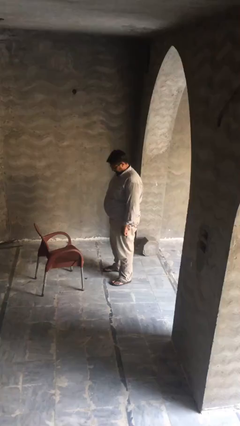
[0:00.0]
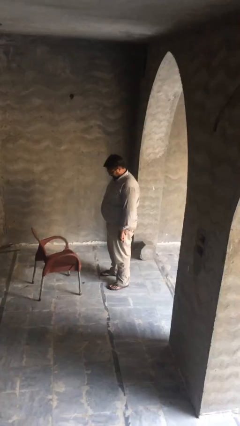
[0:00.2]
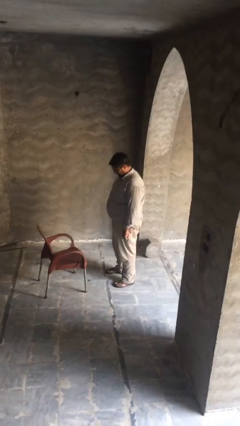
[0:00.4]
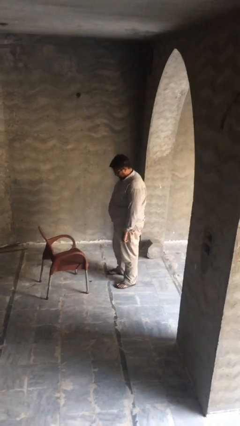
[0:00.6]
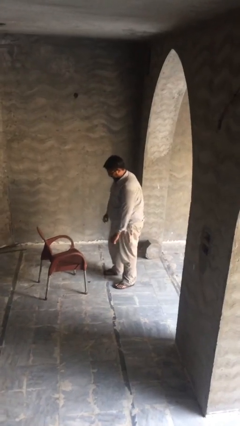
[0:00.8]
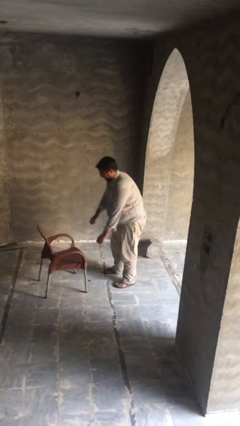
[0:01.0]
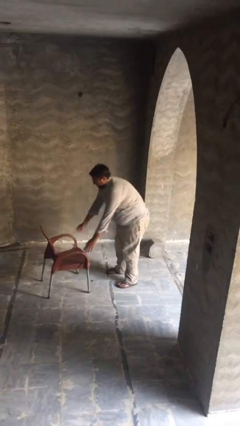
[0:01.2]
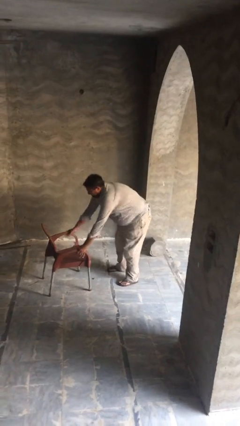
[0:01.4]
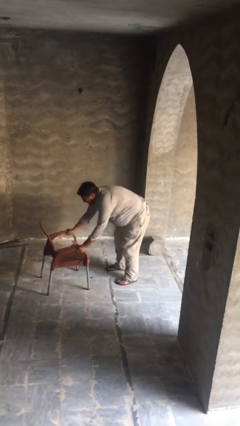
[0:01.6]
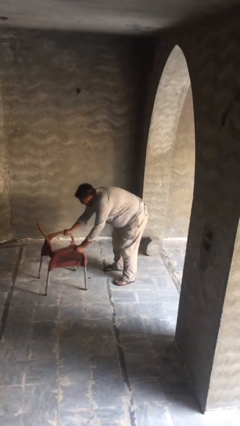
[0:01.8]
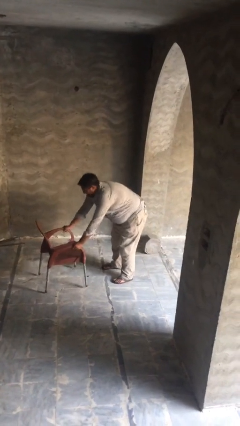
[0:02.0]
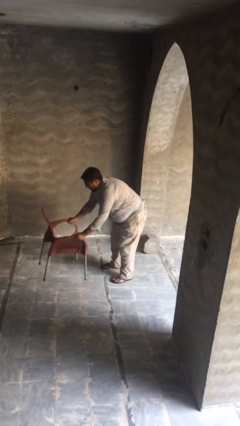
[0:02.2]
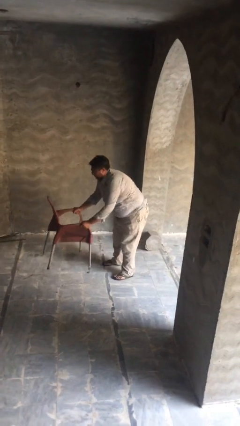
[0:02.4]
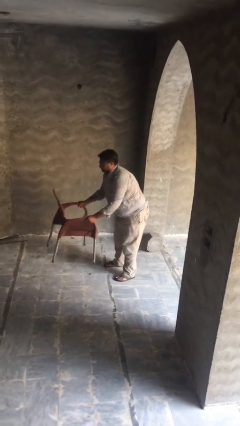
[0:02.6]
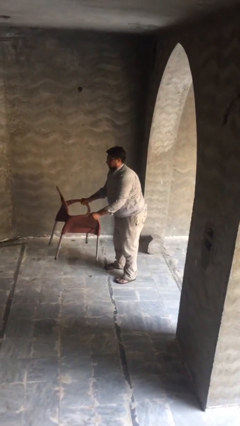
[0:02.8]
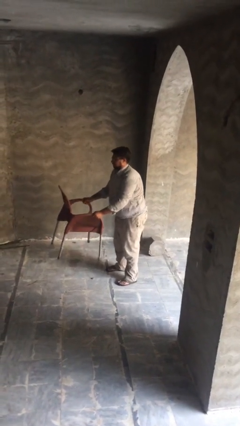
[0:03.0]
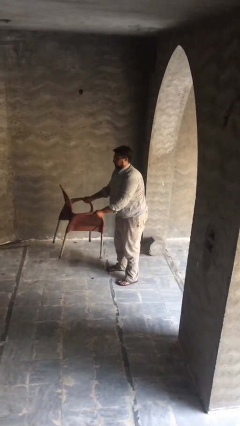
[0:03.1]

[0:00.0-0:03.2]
person picks up object from floor

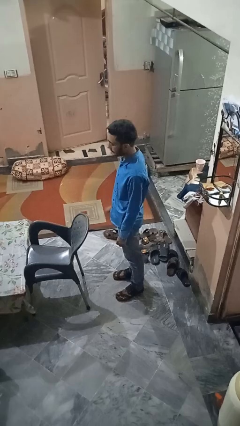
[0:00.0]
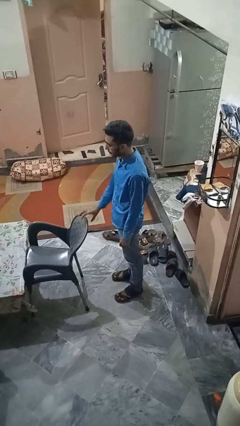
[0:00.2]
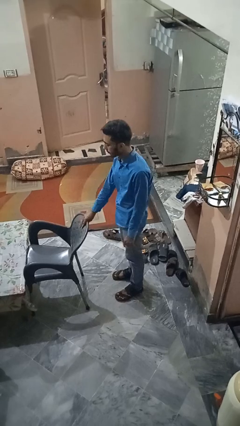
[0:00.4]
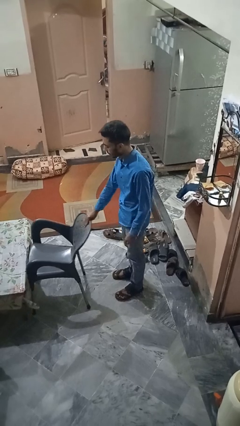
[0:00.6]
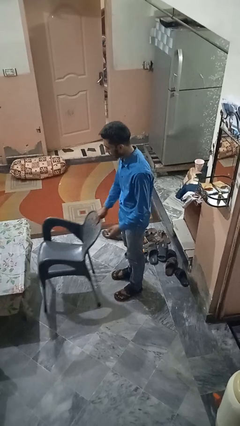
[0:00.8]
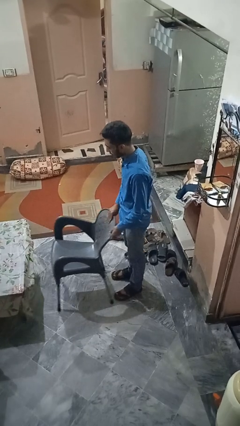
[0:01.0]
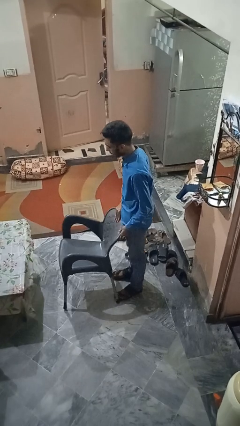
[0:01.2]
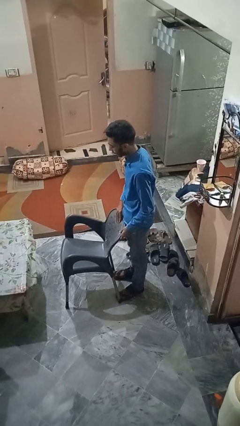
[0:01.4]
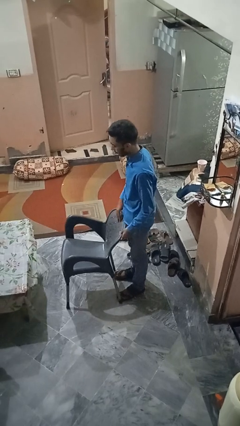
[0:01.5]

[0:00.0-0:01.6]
person pulls out chair

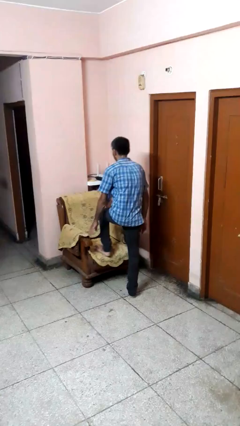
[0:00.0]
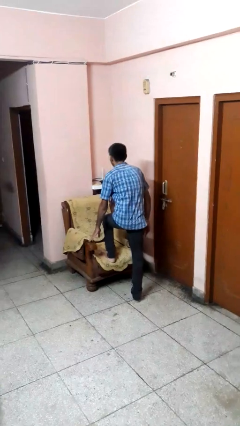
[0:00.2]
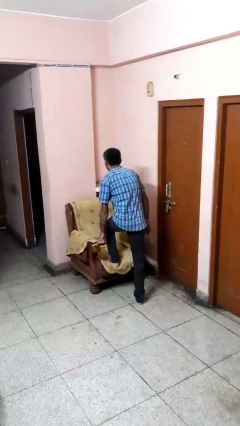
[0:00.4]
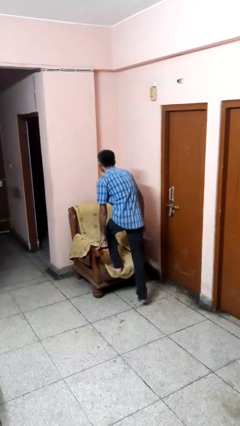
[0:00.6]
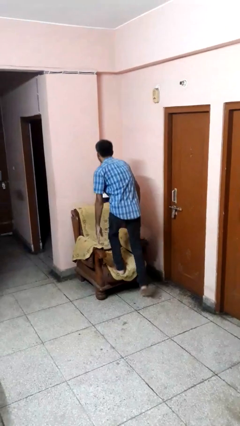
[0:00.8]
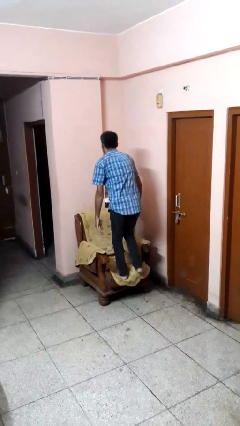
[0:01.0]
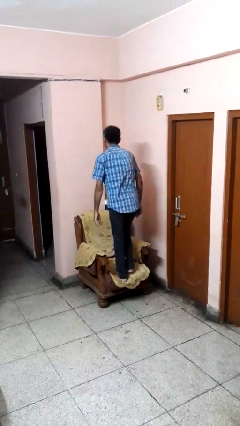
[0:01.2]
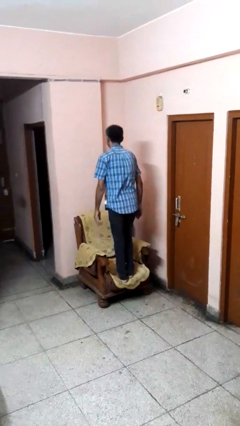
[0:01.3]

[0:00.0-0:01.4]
person climbs on couch

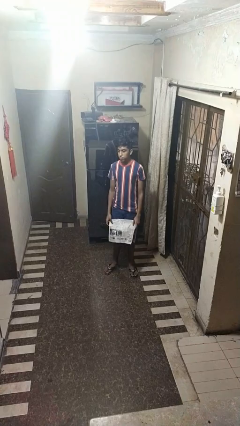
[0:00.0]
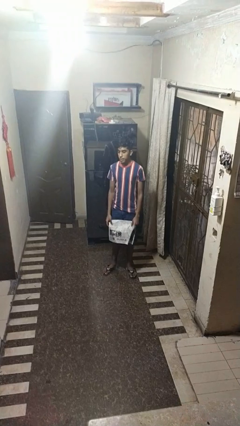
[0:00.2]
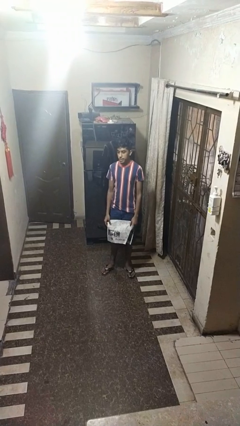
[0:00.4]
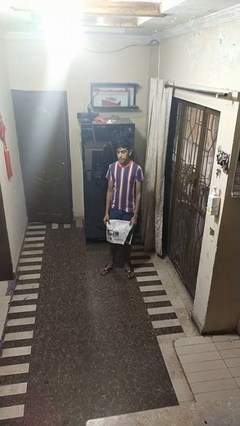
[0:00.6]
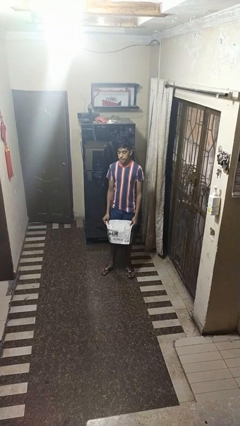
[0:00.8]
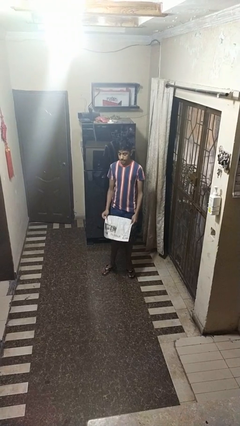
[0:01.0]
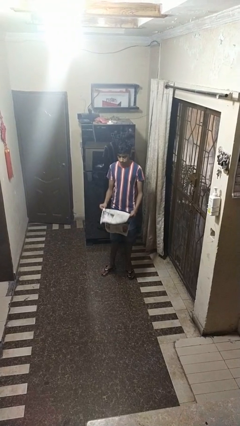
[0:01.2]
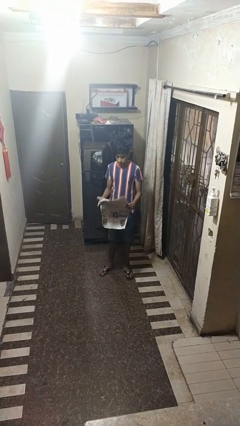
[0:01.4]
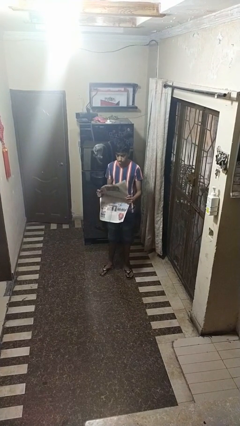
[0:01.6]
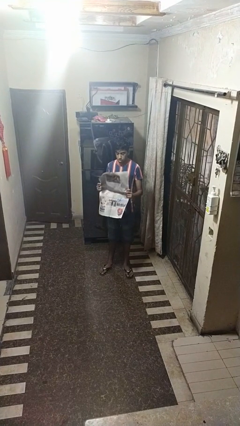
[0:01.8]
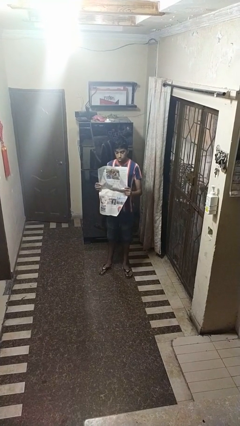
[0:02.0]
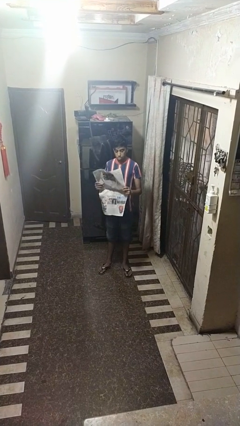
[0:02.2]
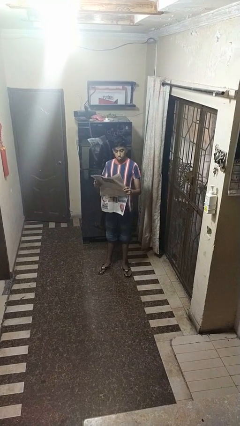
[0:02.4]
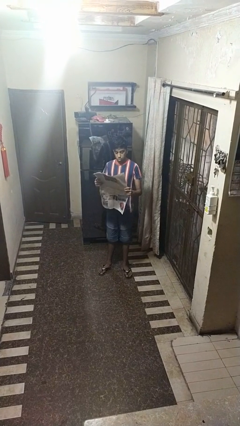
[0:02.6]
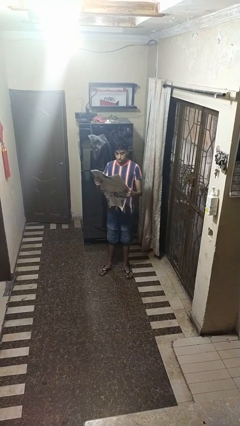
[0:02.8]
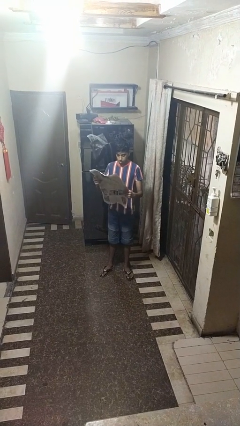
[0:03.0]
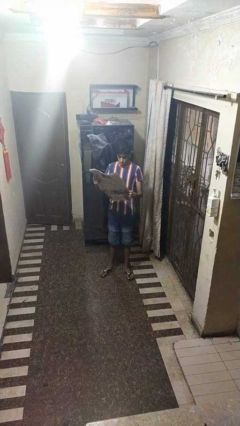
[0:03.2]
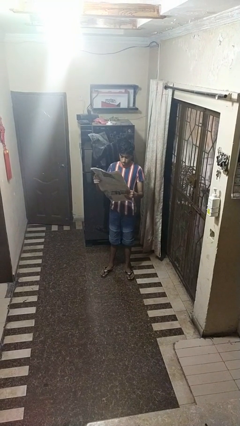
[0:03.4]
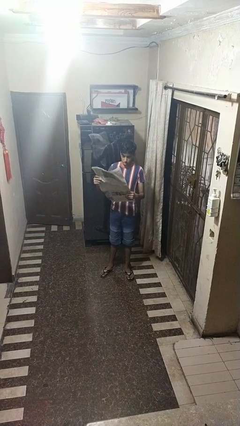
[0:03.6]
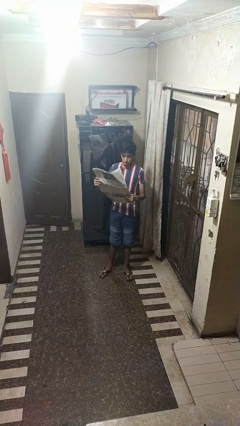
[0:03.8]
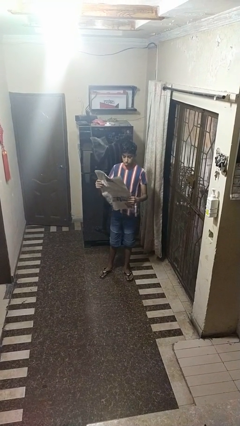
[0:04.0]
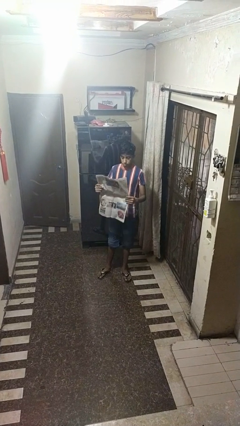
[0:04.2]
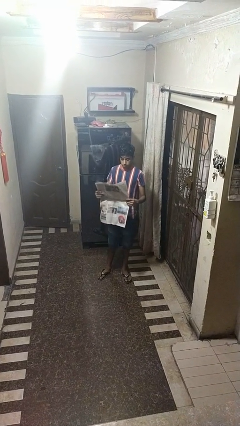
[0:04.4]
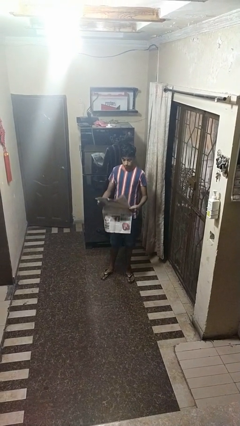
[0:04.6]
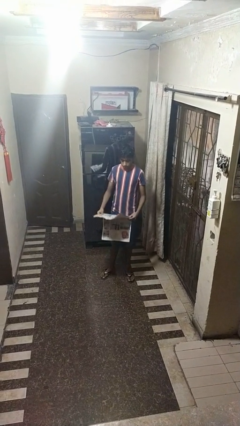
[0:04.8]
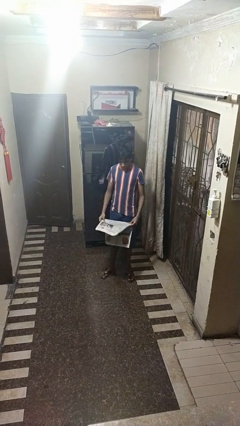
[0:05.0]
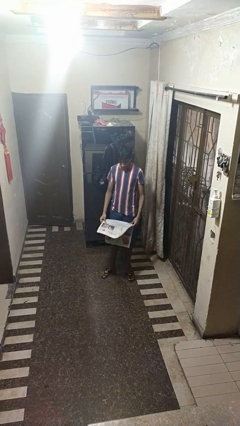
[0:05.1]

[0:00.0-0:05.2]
person reads newspaper

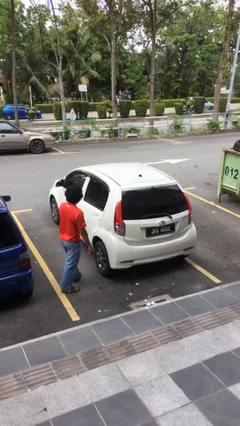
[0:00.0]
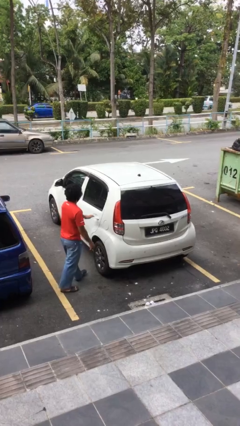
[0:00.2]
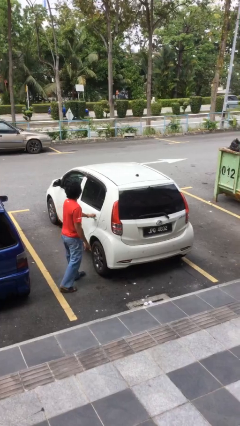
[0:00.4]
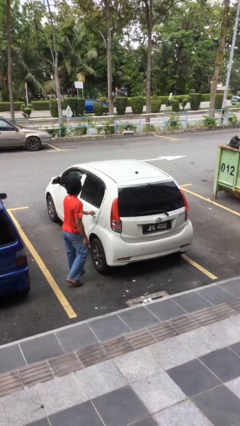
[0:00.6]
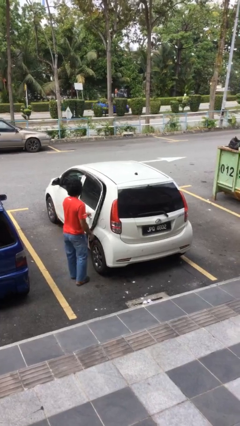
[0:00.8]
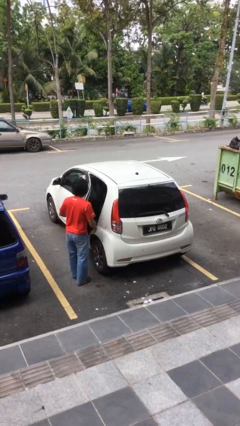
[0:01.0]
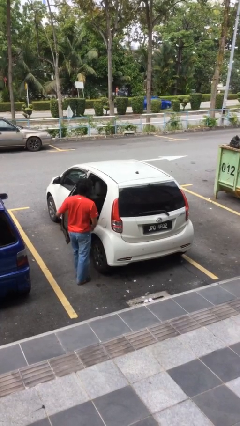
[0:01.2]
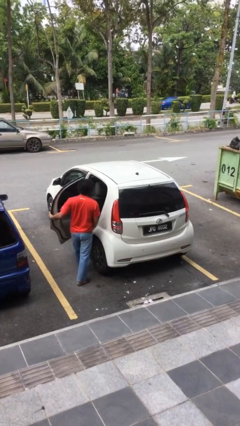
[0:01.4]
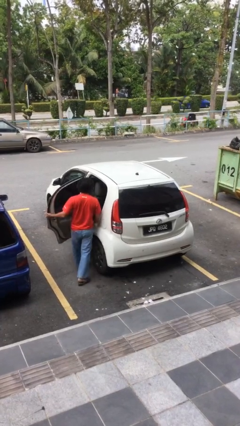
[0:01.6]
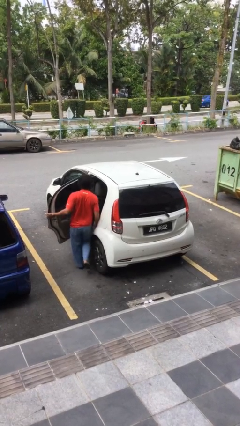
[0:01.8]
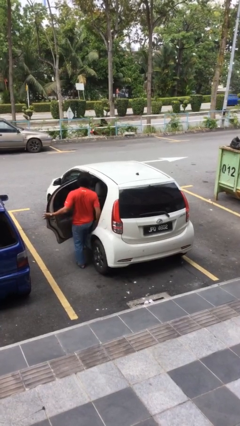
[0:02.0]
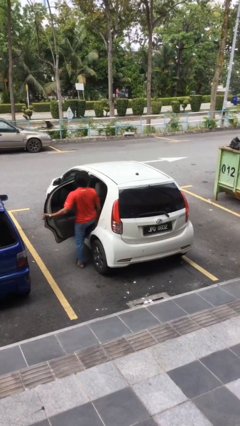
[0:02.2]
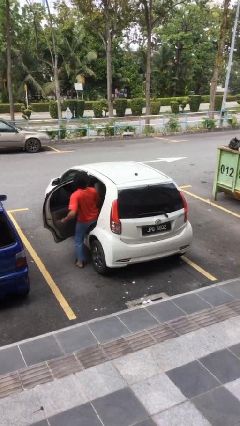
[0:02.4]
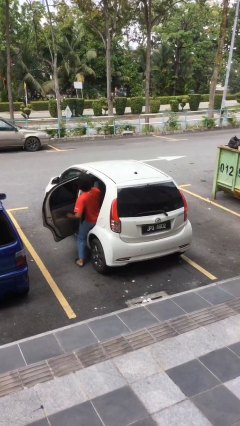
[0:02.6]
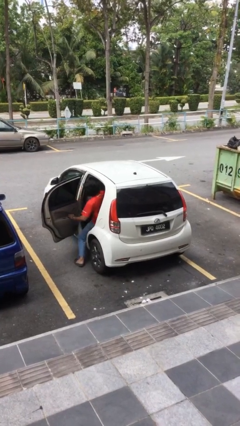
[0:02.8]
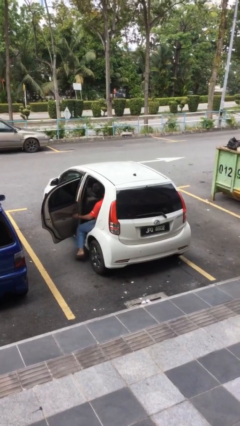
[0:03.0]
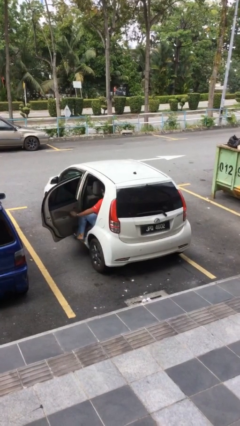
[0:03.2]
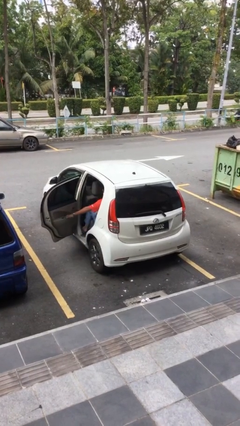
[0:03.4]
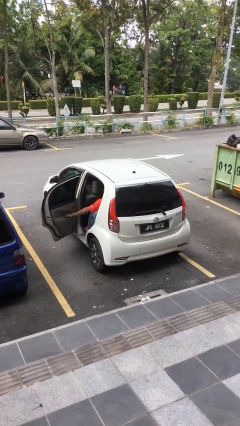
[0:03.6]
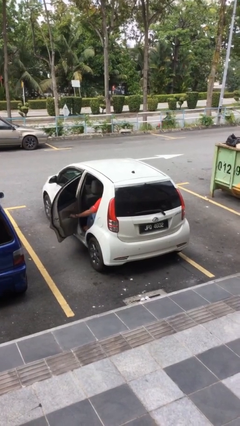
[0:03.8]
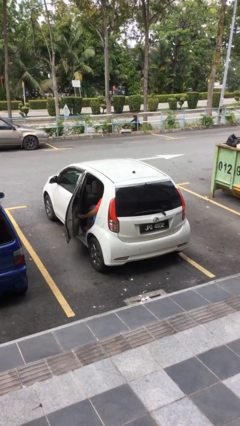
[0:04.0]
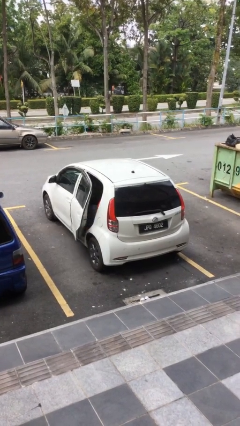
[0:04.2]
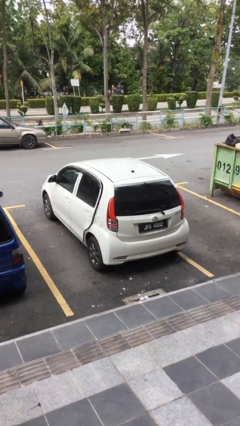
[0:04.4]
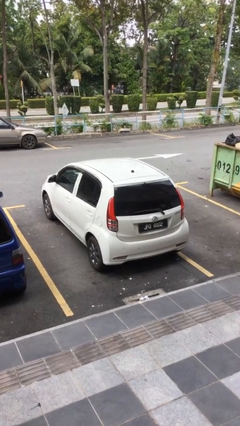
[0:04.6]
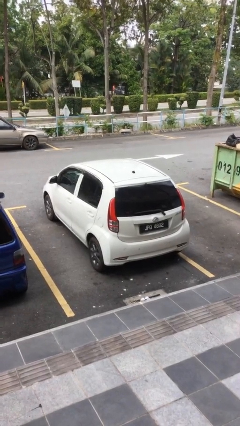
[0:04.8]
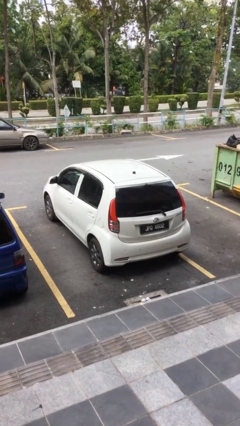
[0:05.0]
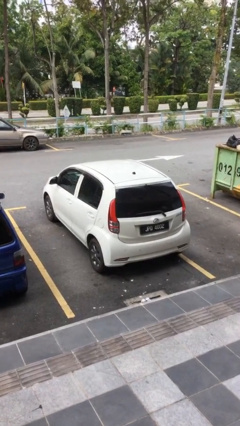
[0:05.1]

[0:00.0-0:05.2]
car picks up person

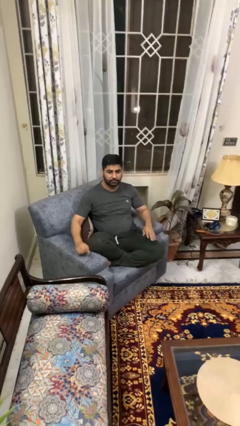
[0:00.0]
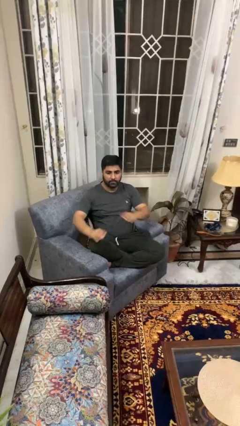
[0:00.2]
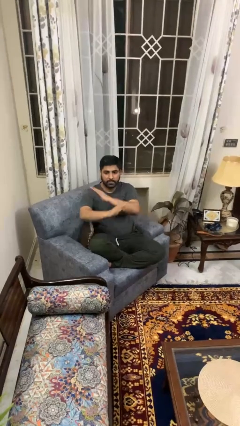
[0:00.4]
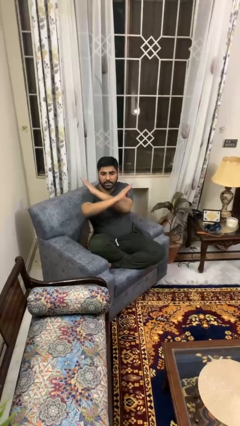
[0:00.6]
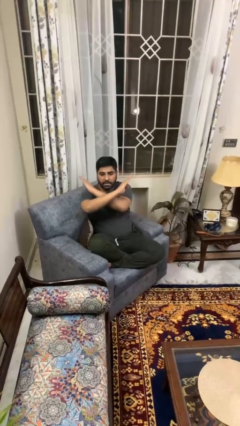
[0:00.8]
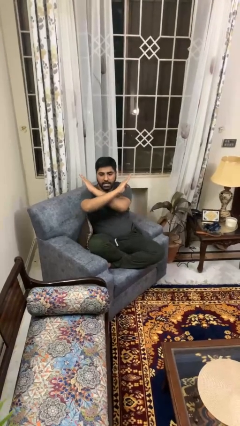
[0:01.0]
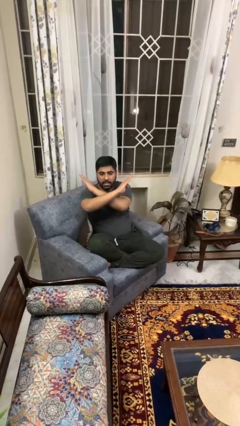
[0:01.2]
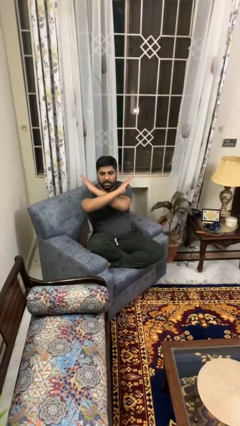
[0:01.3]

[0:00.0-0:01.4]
person gestures arms x
